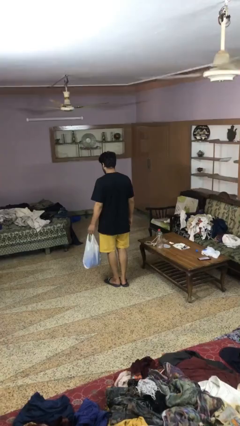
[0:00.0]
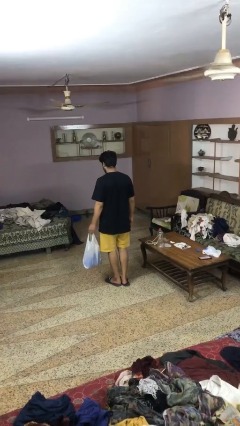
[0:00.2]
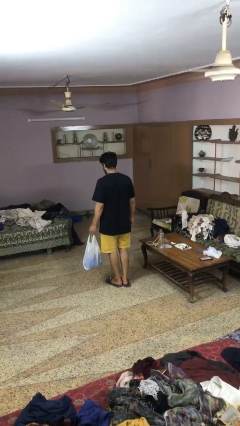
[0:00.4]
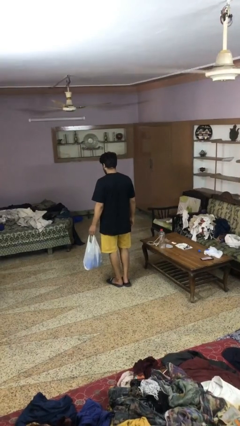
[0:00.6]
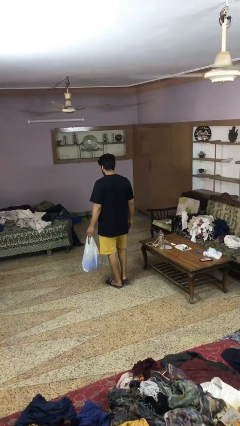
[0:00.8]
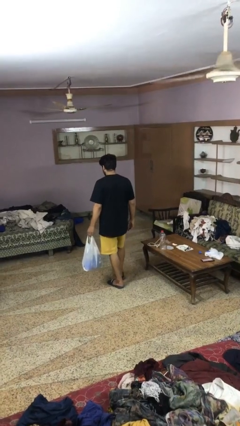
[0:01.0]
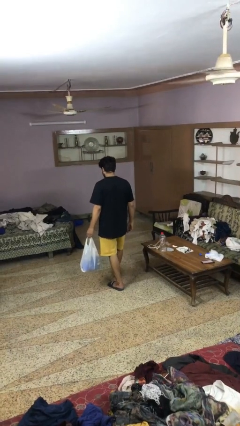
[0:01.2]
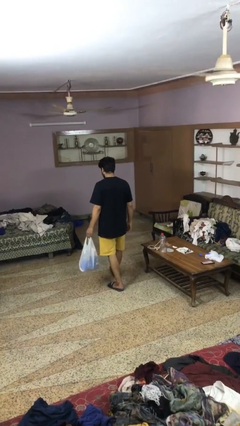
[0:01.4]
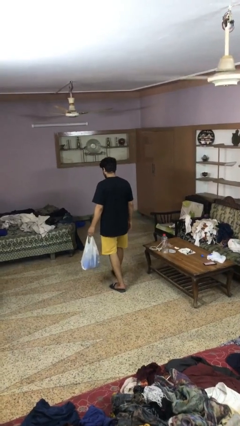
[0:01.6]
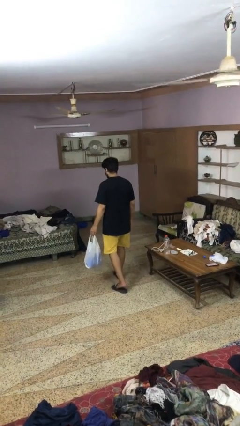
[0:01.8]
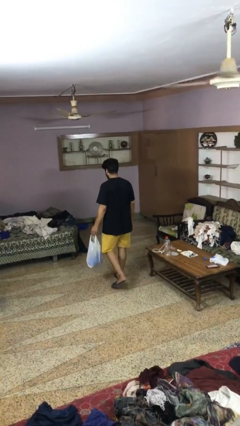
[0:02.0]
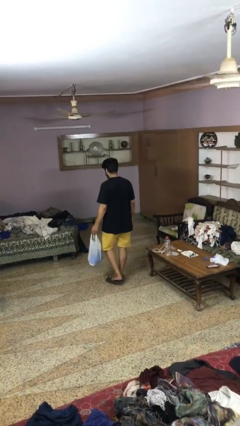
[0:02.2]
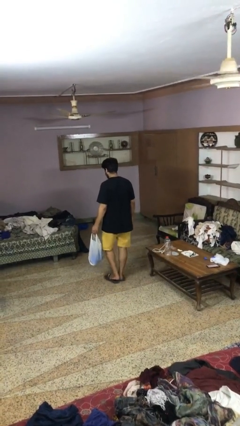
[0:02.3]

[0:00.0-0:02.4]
person carries groceries

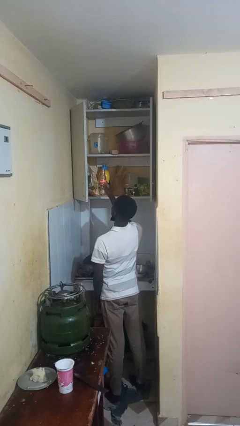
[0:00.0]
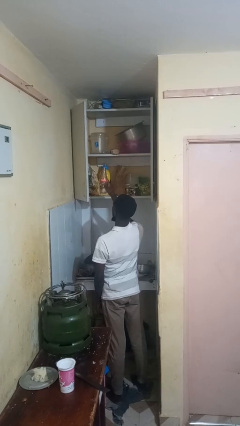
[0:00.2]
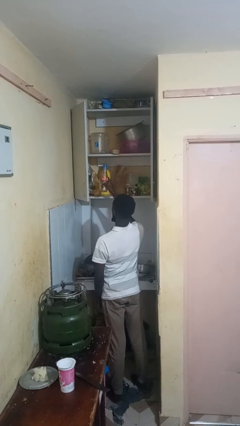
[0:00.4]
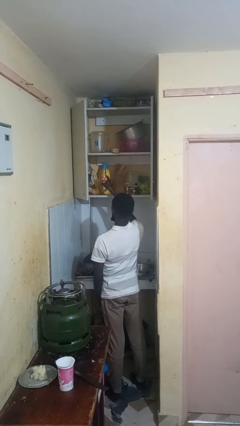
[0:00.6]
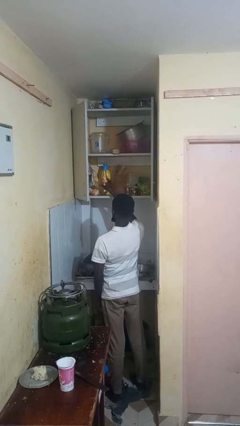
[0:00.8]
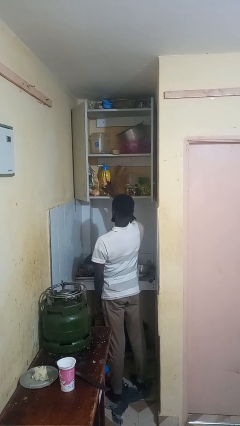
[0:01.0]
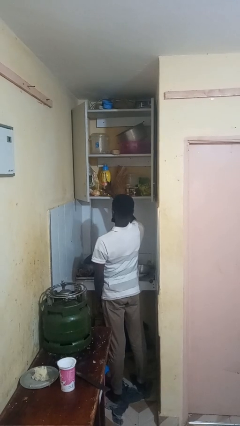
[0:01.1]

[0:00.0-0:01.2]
person puts down object into cabinet

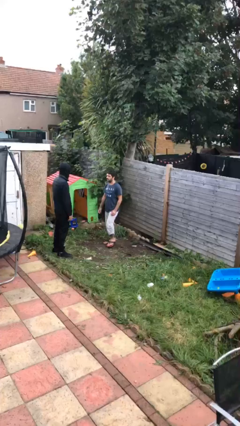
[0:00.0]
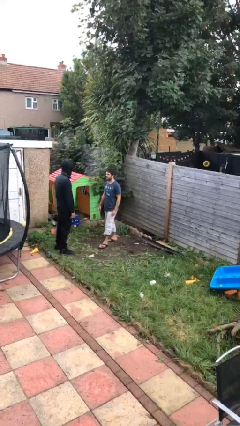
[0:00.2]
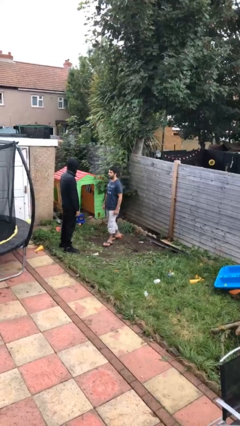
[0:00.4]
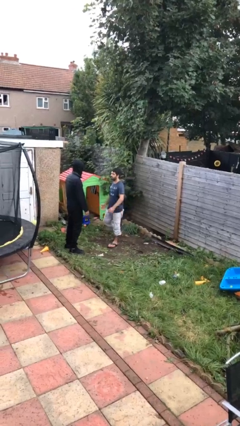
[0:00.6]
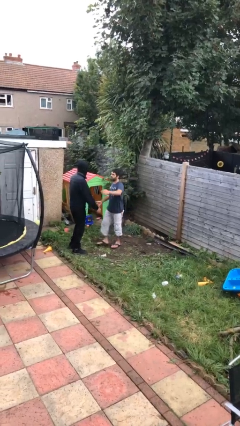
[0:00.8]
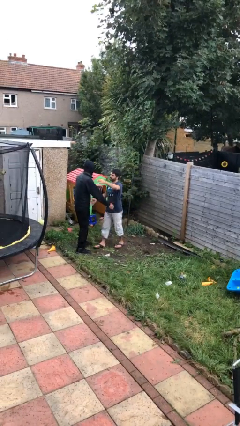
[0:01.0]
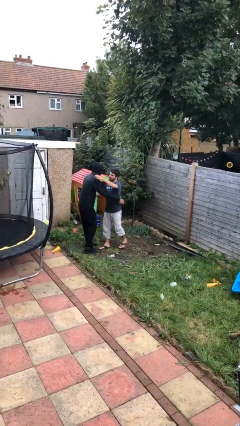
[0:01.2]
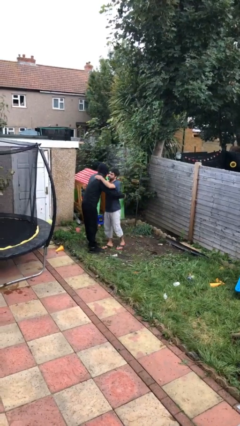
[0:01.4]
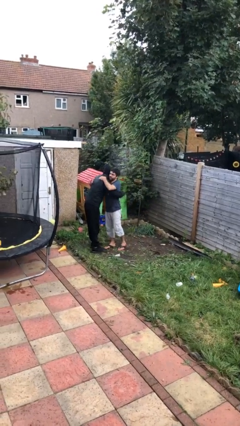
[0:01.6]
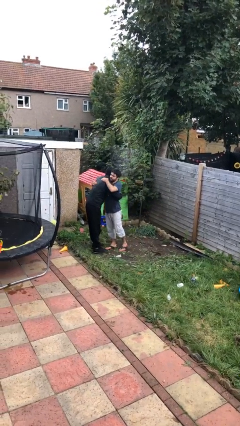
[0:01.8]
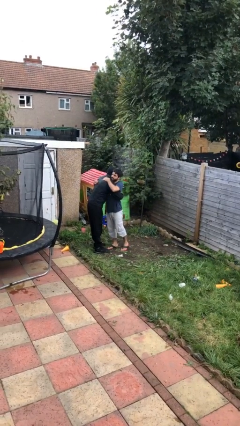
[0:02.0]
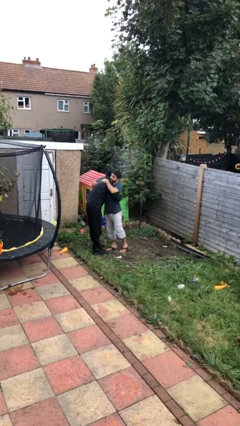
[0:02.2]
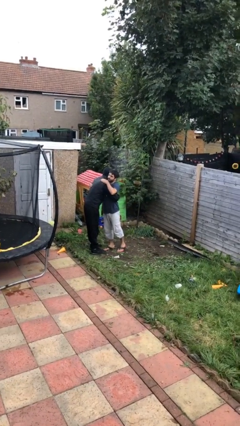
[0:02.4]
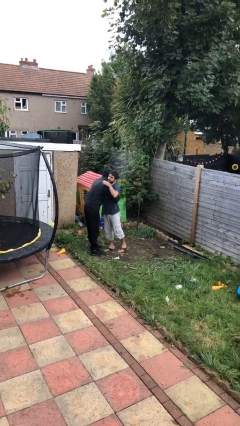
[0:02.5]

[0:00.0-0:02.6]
person embraces person

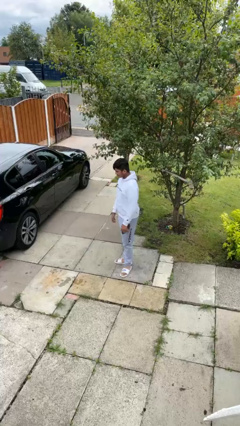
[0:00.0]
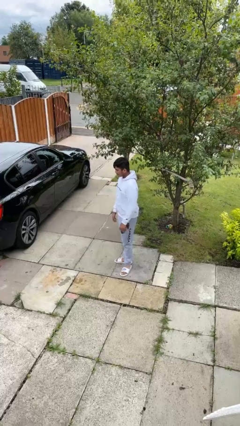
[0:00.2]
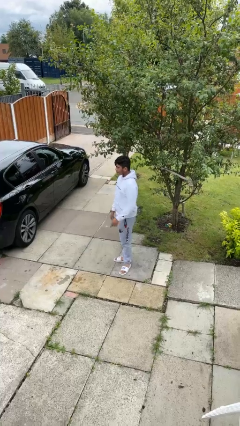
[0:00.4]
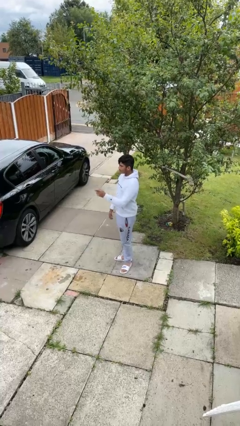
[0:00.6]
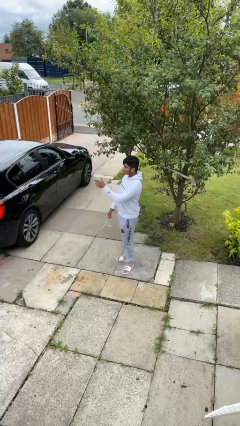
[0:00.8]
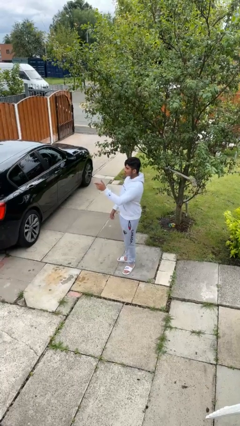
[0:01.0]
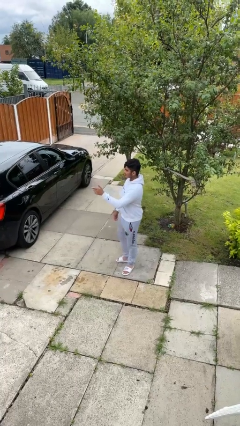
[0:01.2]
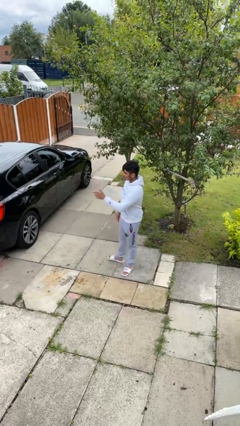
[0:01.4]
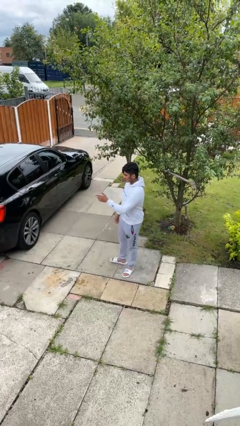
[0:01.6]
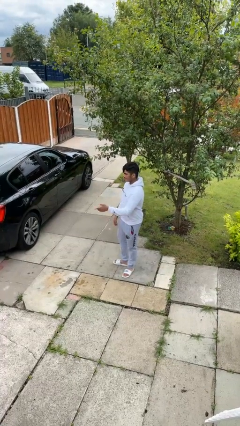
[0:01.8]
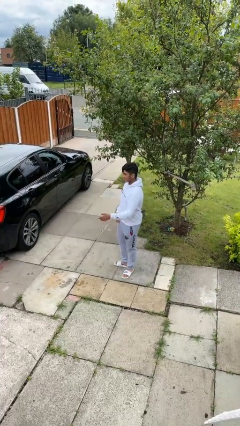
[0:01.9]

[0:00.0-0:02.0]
person points at person

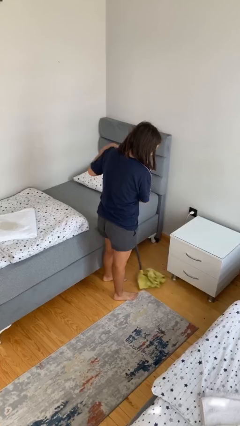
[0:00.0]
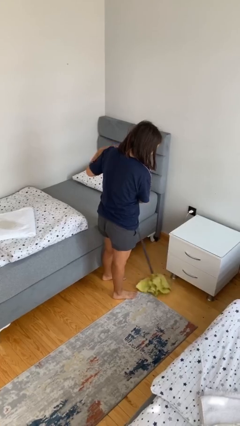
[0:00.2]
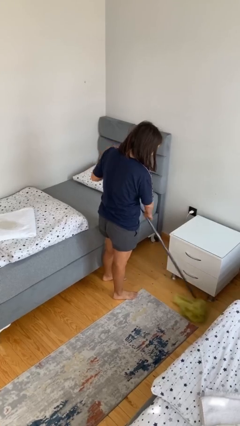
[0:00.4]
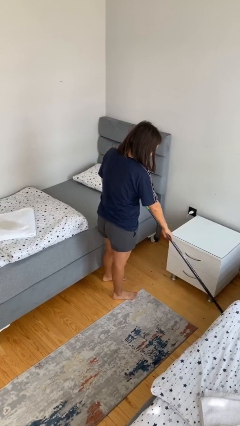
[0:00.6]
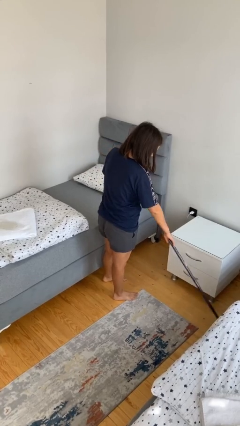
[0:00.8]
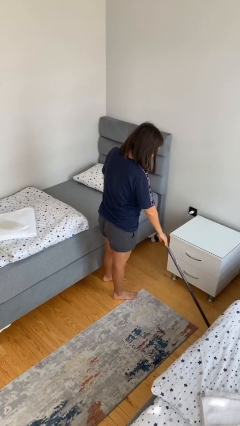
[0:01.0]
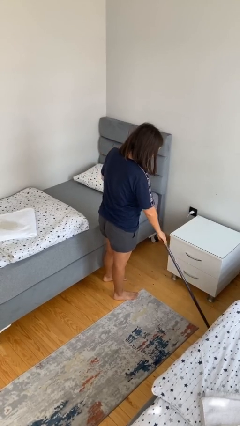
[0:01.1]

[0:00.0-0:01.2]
person sweeps floor

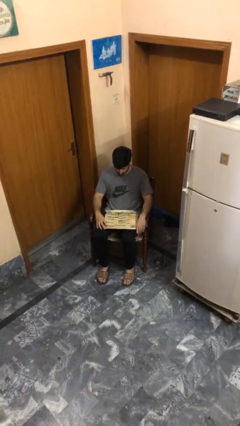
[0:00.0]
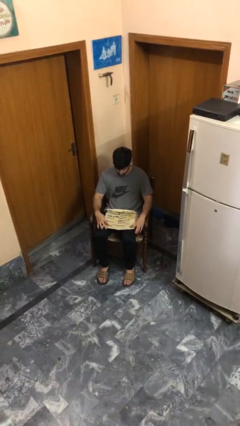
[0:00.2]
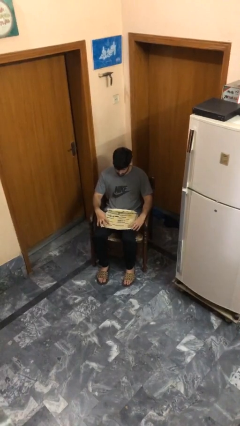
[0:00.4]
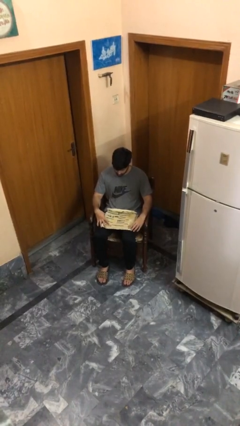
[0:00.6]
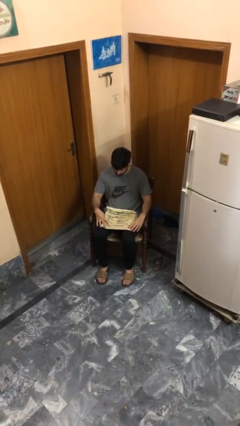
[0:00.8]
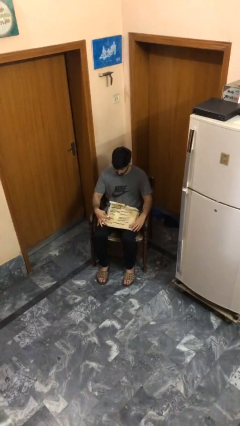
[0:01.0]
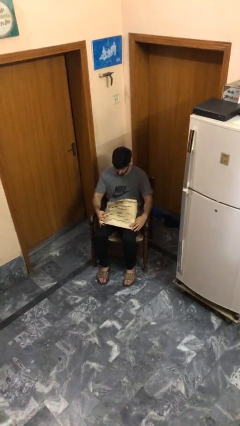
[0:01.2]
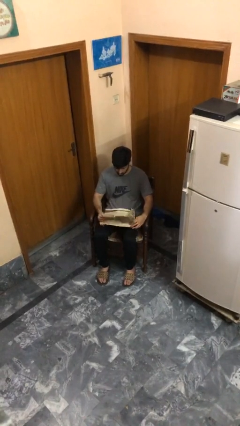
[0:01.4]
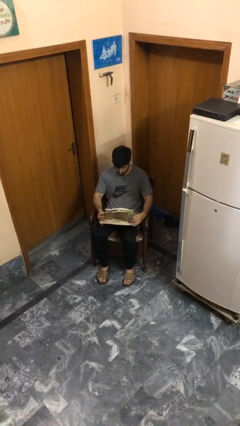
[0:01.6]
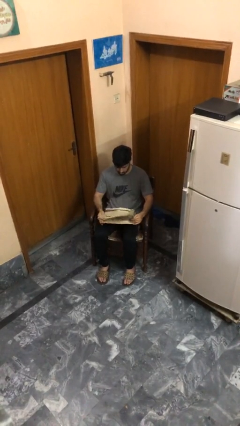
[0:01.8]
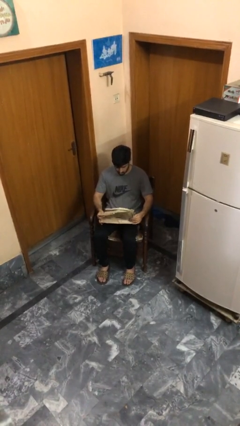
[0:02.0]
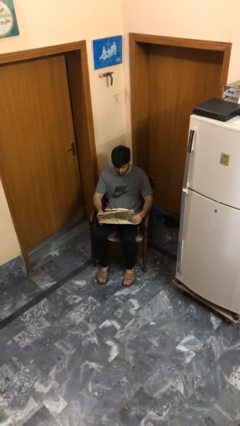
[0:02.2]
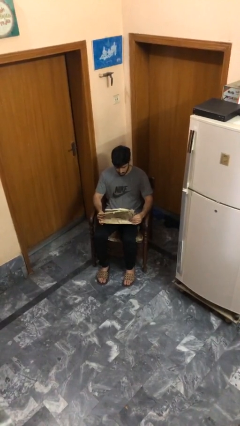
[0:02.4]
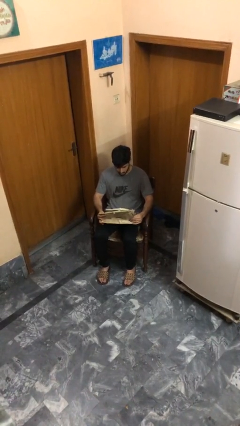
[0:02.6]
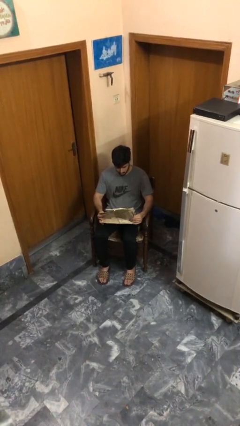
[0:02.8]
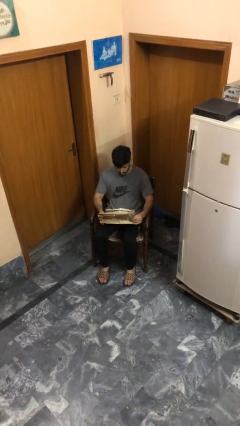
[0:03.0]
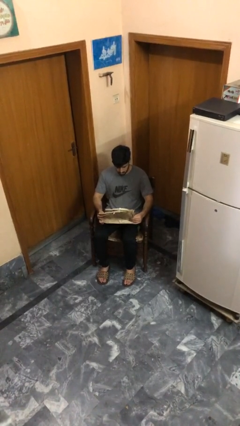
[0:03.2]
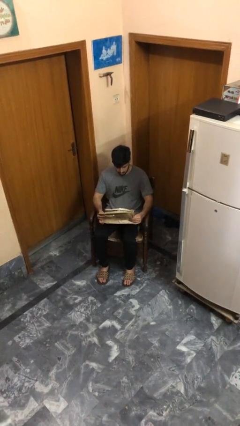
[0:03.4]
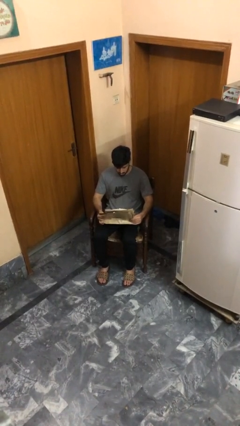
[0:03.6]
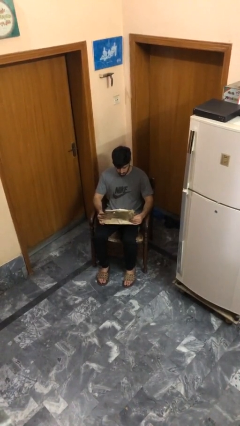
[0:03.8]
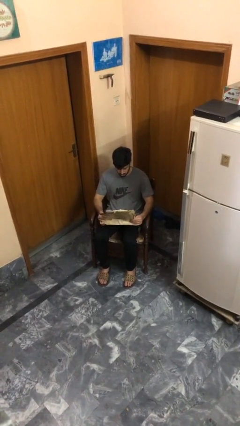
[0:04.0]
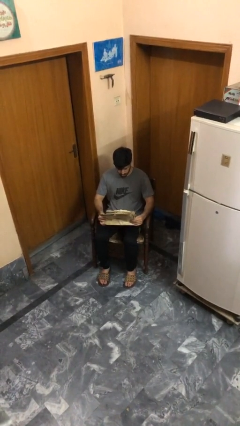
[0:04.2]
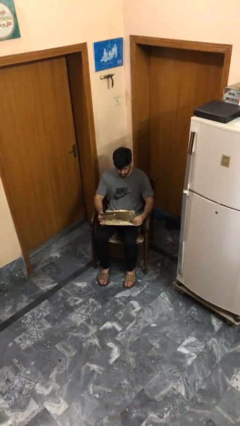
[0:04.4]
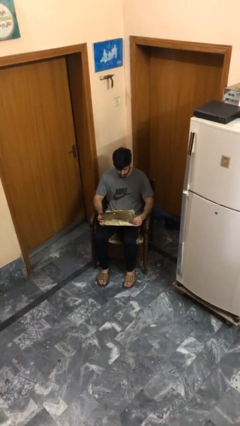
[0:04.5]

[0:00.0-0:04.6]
person reads newspaper

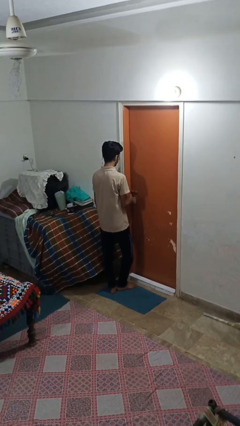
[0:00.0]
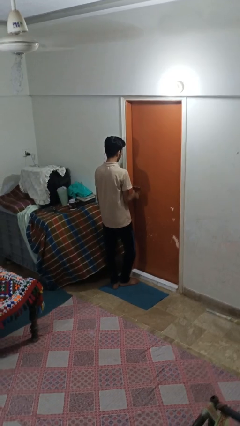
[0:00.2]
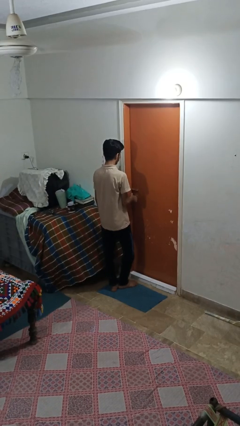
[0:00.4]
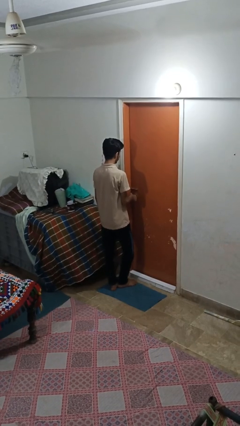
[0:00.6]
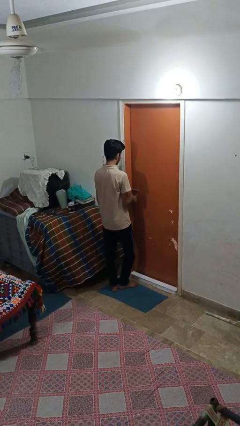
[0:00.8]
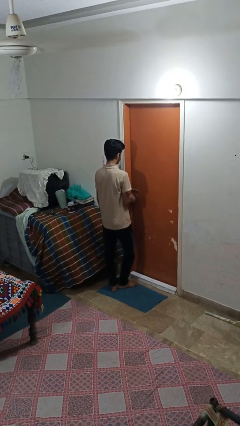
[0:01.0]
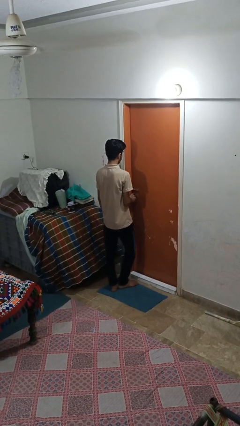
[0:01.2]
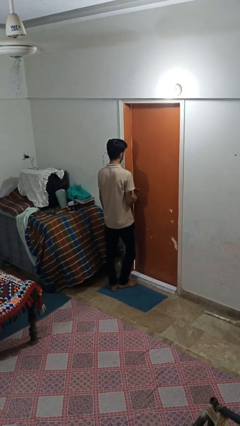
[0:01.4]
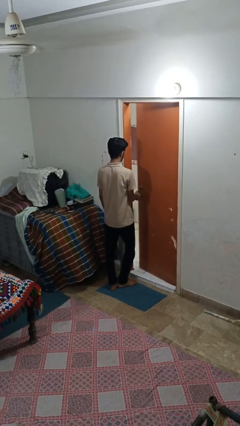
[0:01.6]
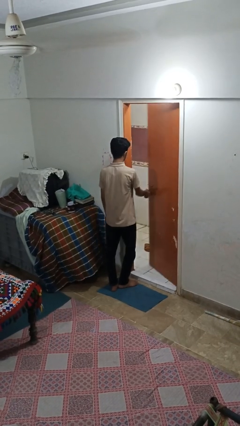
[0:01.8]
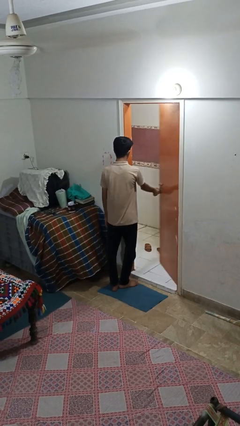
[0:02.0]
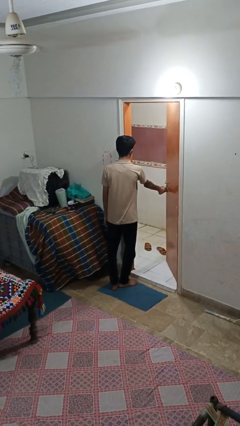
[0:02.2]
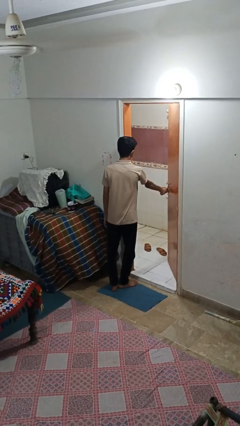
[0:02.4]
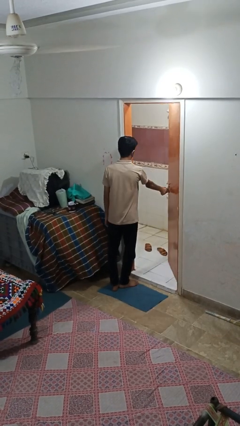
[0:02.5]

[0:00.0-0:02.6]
person opens facility door

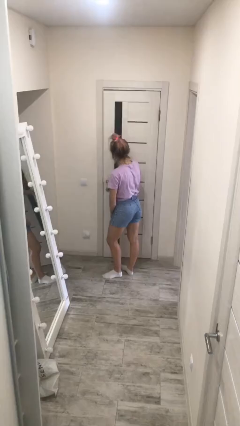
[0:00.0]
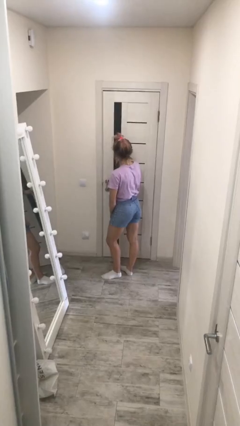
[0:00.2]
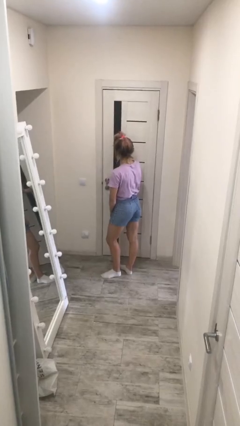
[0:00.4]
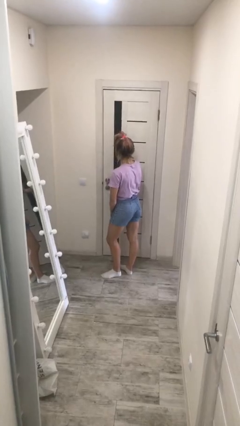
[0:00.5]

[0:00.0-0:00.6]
person closes facility door
